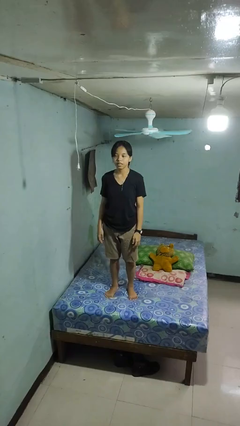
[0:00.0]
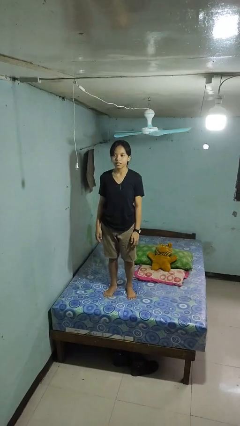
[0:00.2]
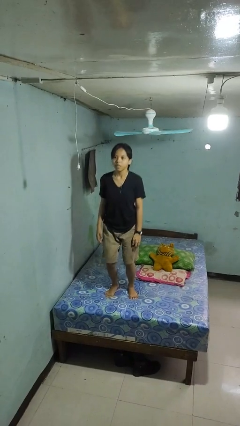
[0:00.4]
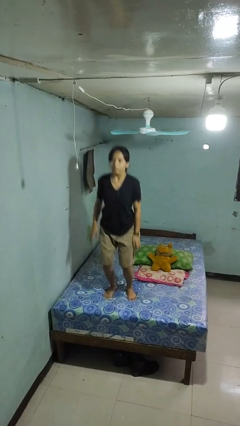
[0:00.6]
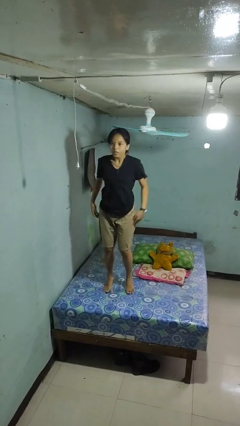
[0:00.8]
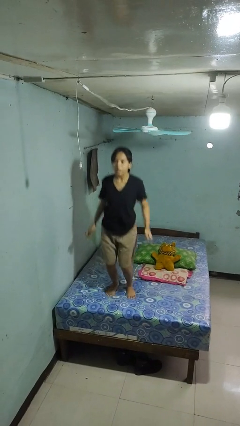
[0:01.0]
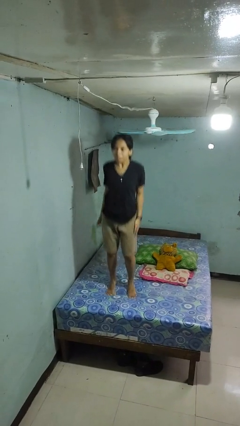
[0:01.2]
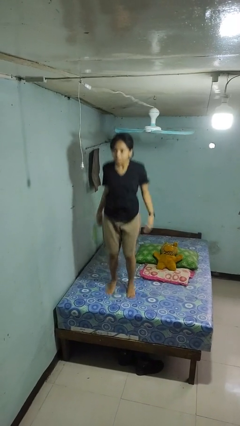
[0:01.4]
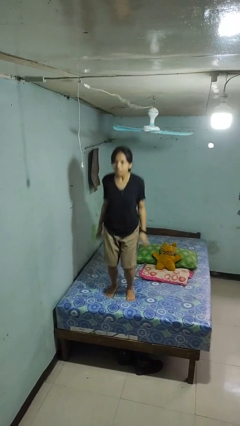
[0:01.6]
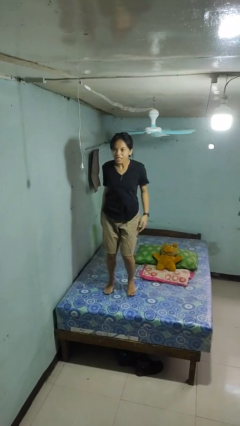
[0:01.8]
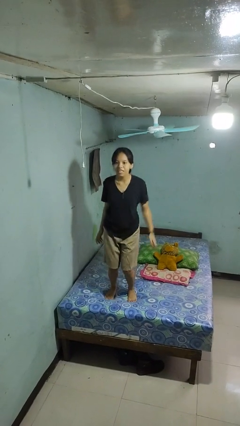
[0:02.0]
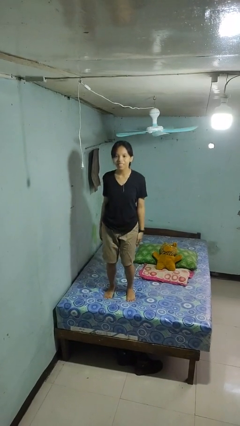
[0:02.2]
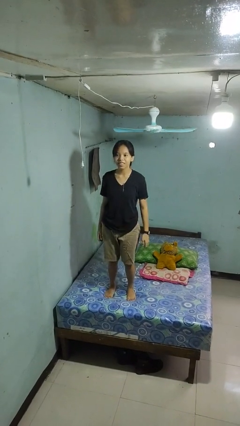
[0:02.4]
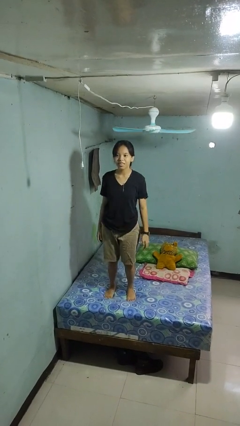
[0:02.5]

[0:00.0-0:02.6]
person jumps on bed

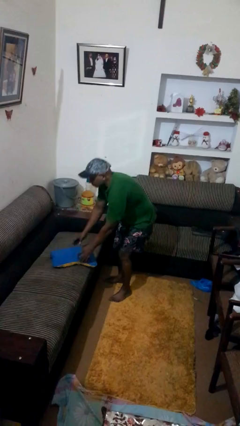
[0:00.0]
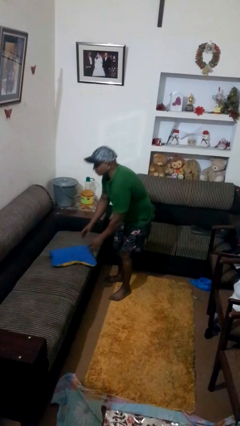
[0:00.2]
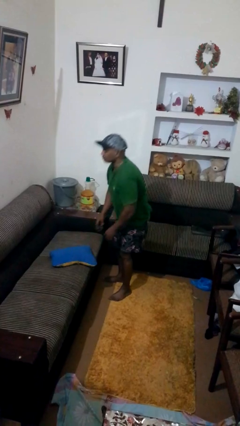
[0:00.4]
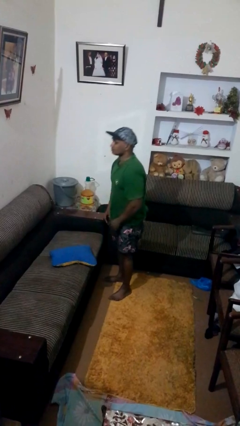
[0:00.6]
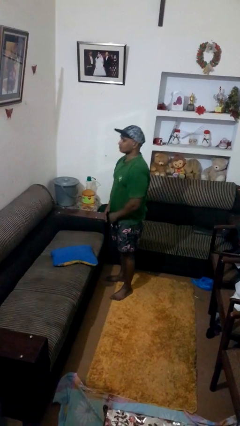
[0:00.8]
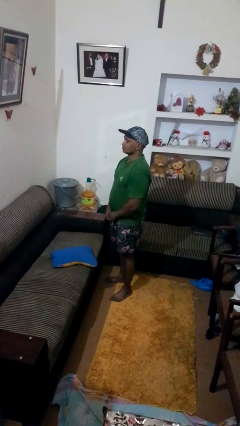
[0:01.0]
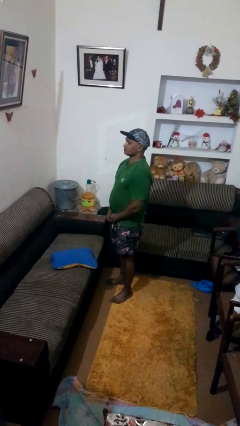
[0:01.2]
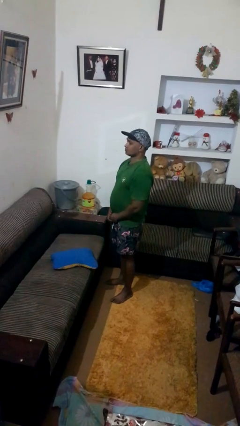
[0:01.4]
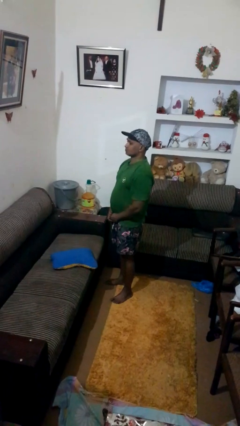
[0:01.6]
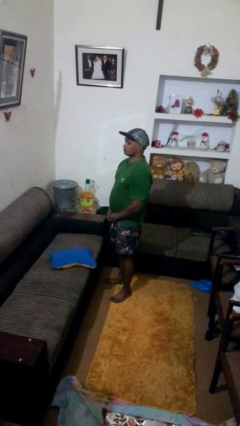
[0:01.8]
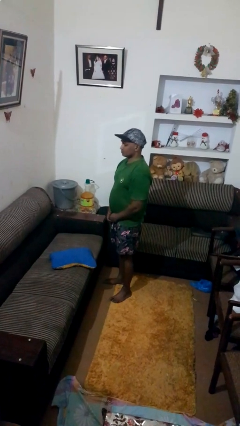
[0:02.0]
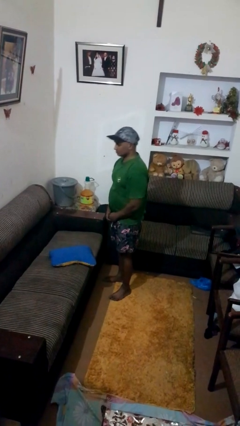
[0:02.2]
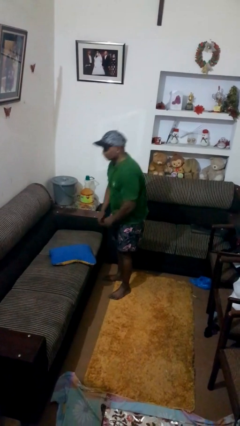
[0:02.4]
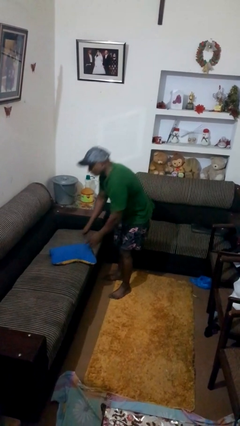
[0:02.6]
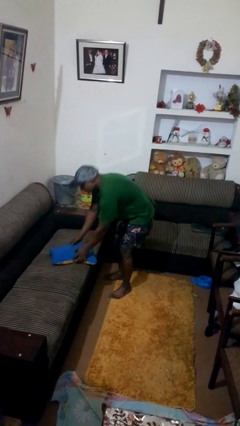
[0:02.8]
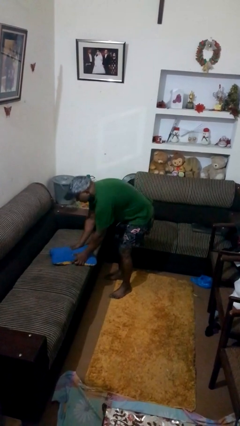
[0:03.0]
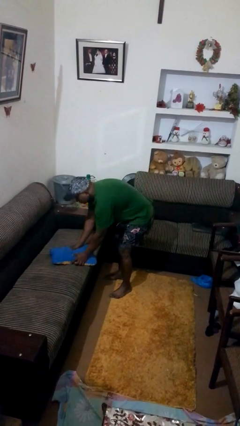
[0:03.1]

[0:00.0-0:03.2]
person puts down object on couch

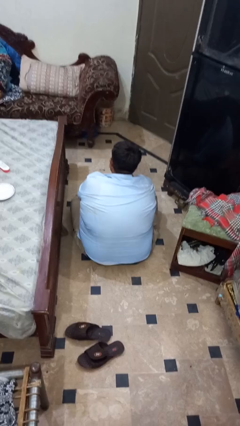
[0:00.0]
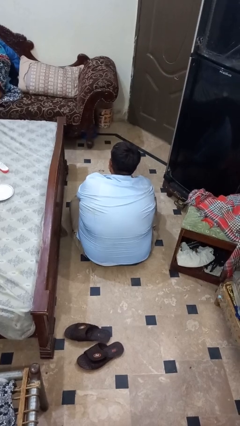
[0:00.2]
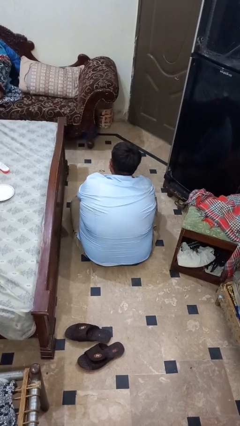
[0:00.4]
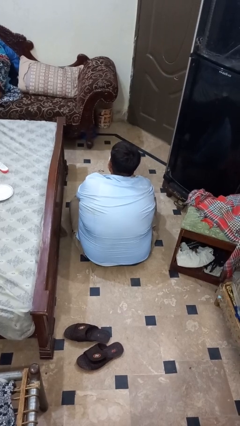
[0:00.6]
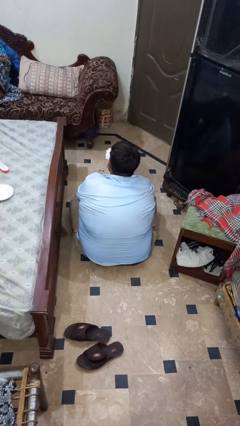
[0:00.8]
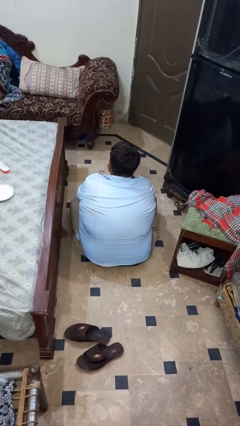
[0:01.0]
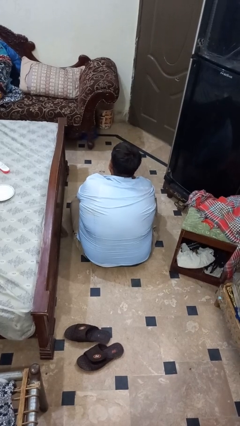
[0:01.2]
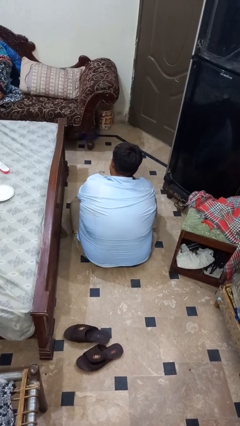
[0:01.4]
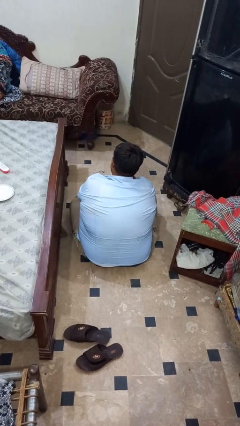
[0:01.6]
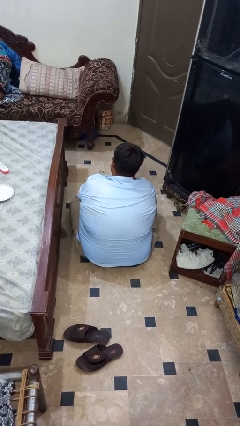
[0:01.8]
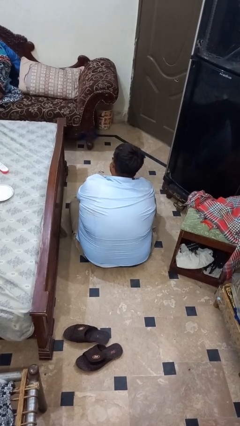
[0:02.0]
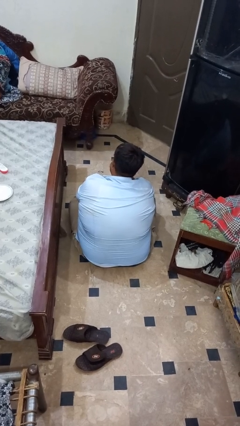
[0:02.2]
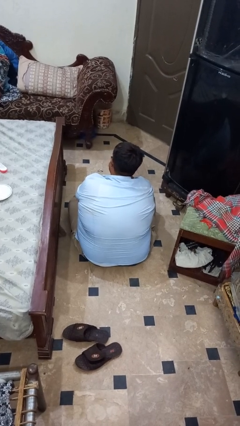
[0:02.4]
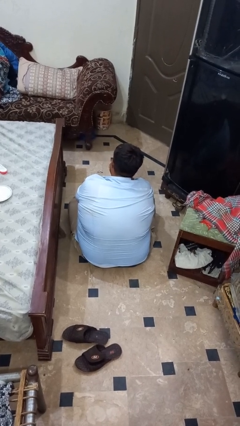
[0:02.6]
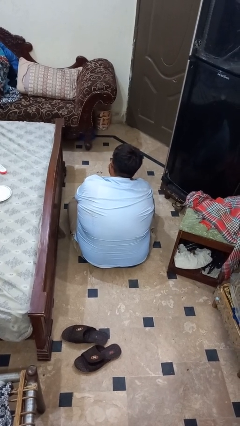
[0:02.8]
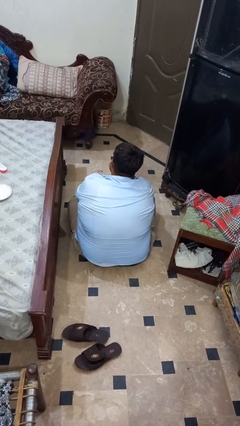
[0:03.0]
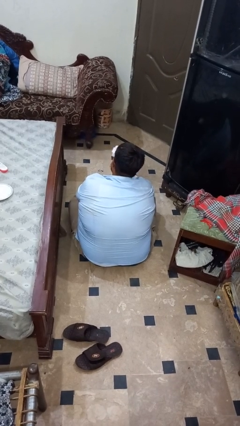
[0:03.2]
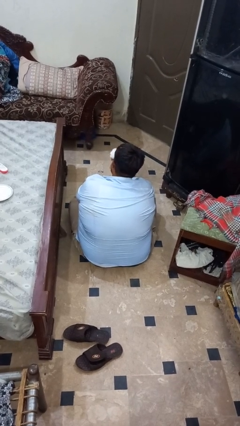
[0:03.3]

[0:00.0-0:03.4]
person blows nose

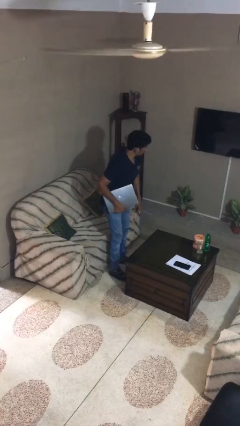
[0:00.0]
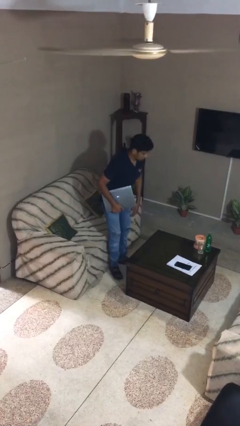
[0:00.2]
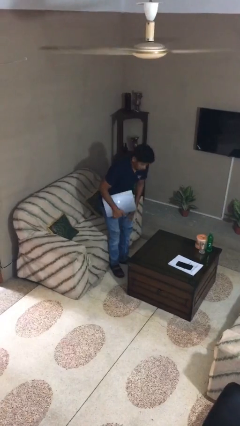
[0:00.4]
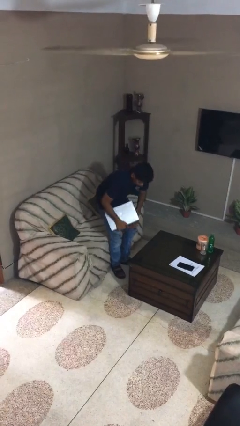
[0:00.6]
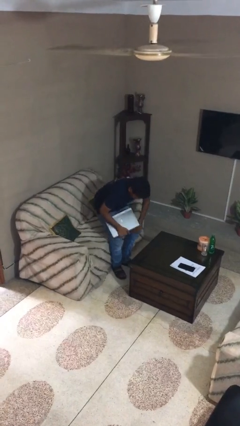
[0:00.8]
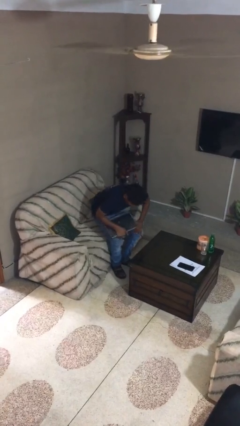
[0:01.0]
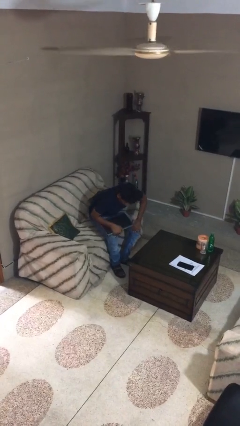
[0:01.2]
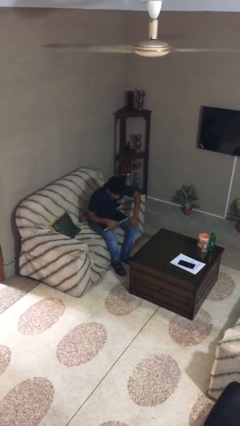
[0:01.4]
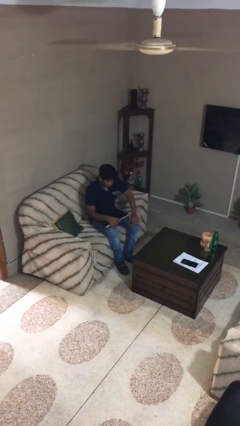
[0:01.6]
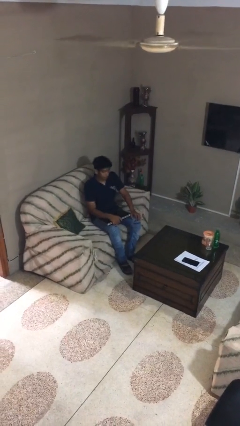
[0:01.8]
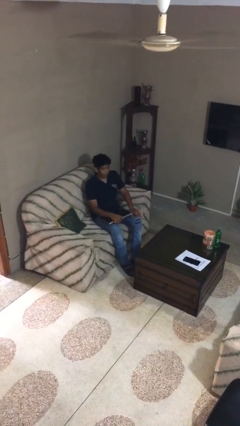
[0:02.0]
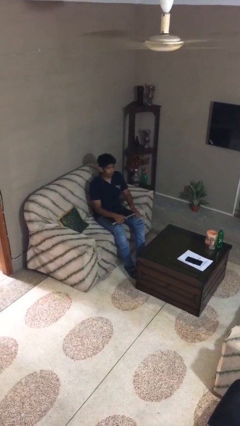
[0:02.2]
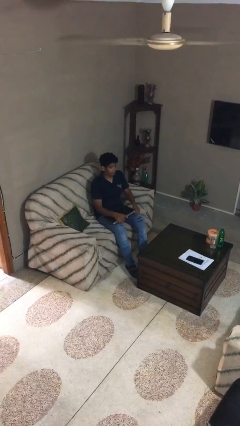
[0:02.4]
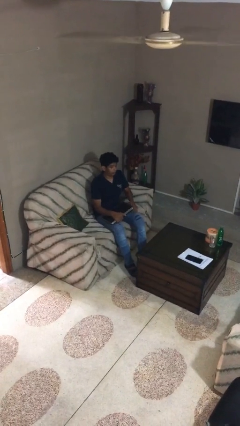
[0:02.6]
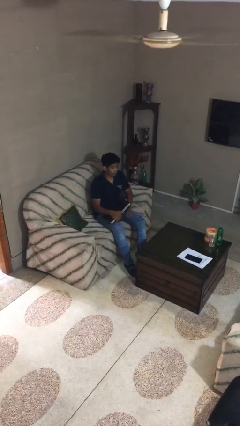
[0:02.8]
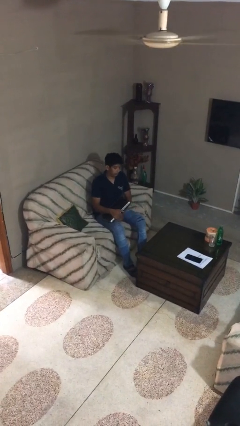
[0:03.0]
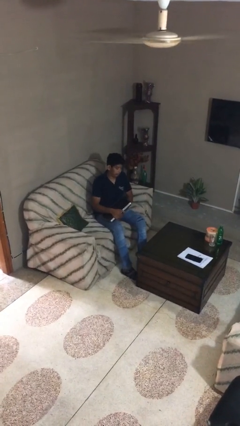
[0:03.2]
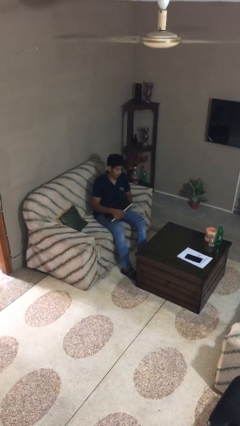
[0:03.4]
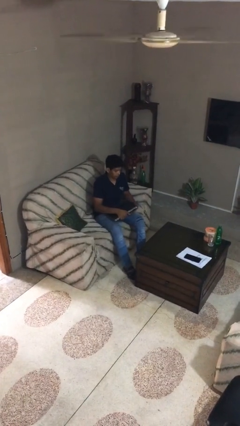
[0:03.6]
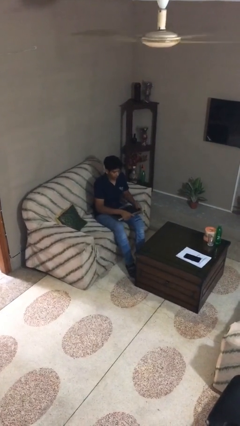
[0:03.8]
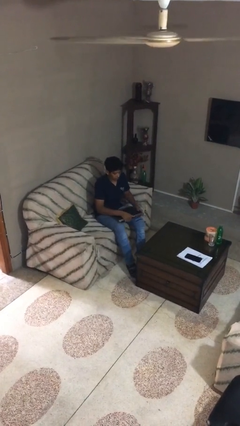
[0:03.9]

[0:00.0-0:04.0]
person sits down

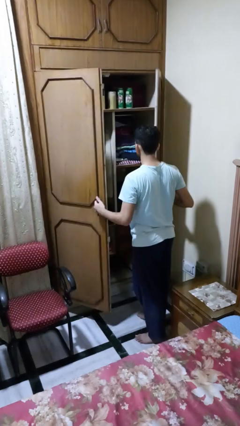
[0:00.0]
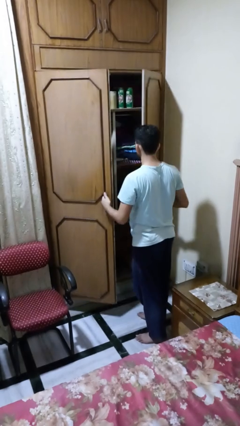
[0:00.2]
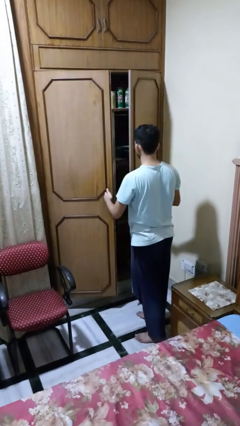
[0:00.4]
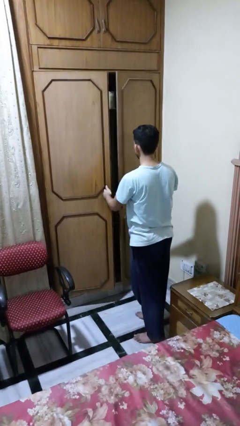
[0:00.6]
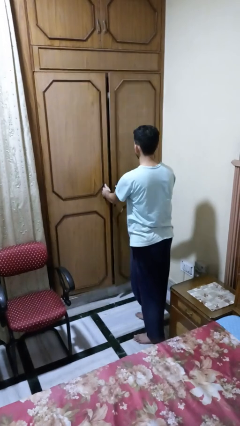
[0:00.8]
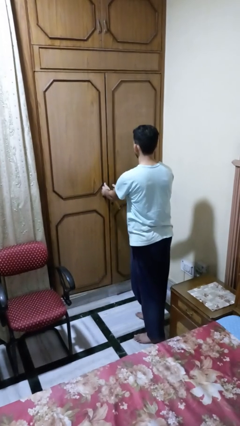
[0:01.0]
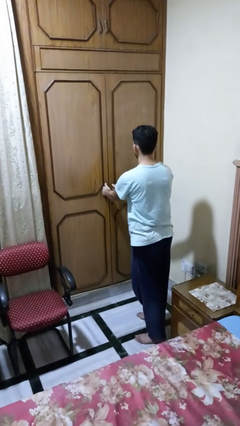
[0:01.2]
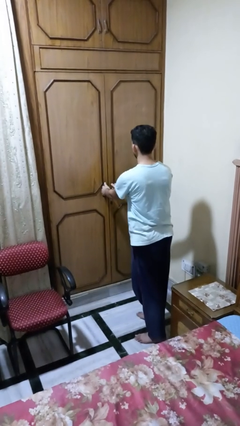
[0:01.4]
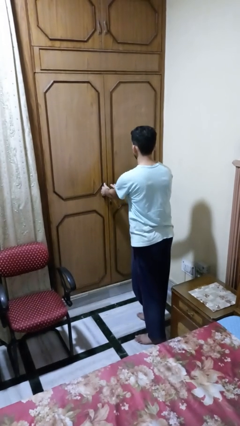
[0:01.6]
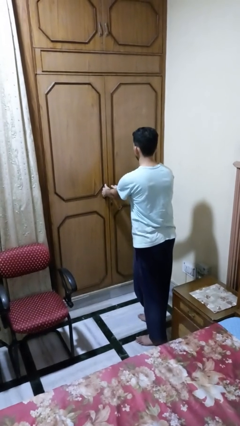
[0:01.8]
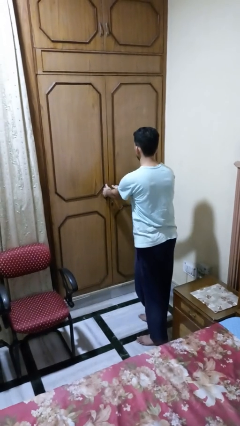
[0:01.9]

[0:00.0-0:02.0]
person closes closet door

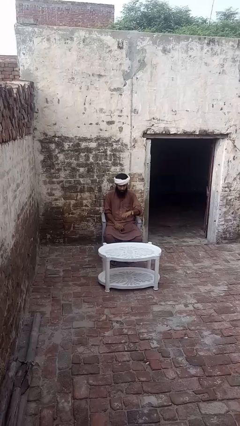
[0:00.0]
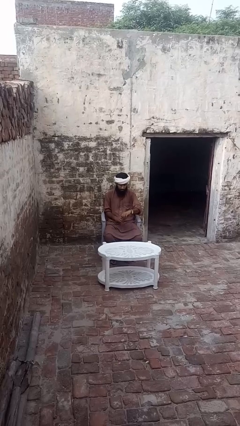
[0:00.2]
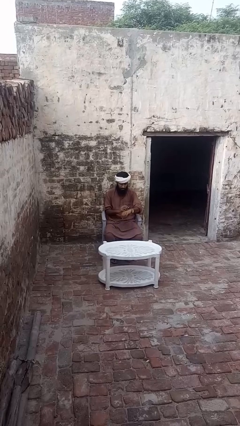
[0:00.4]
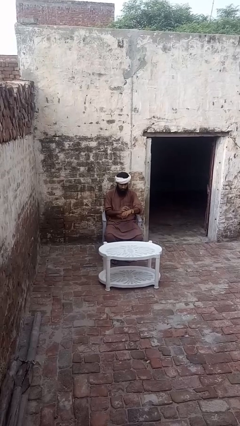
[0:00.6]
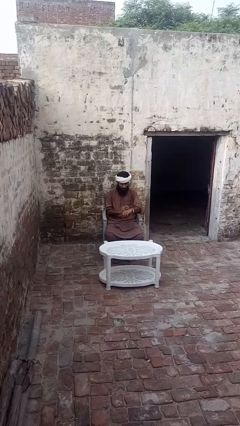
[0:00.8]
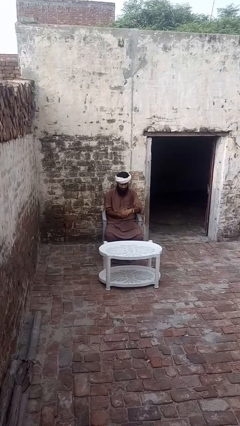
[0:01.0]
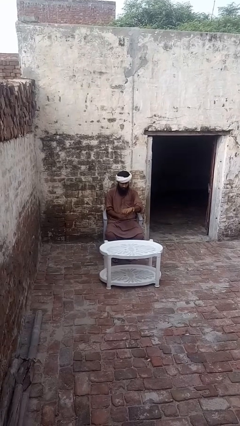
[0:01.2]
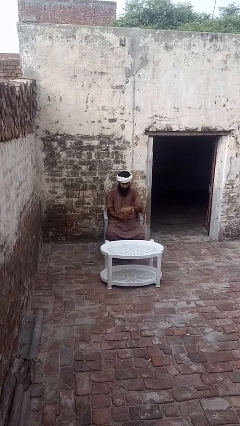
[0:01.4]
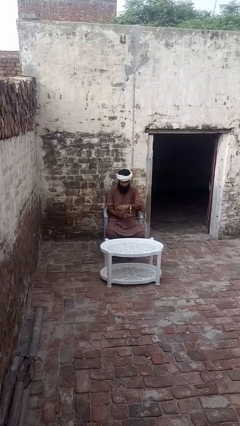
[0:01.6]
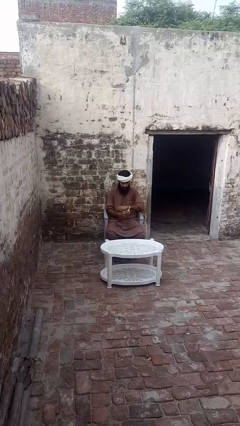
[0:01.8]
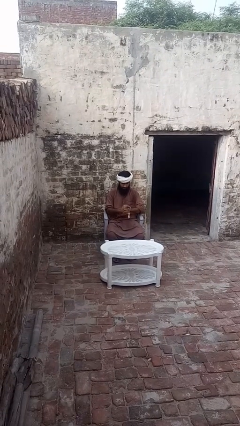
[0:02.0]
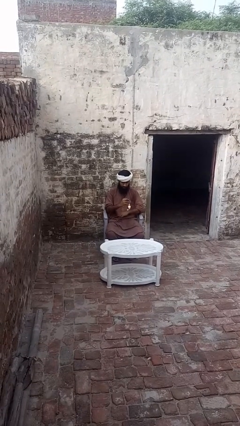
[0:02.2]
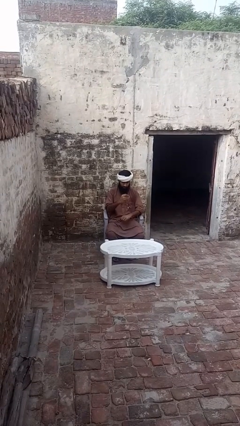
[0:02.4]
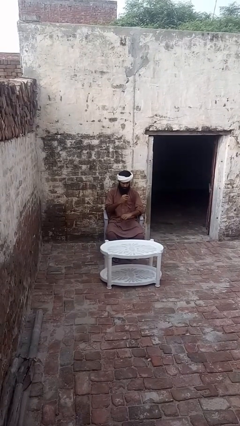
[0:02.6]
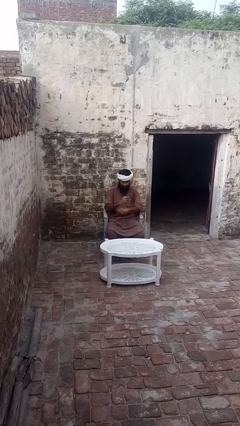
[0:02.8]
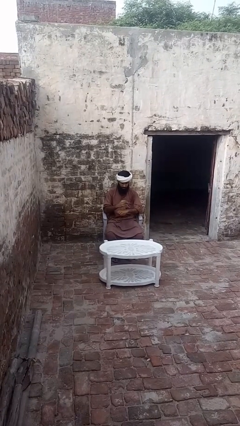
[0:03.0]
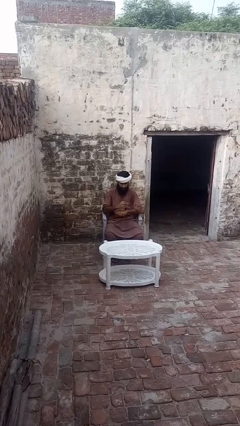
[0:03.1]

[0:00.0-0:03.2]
person takes off wristwatch
